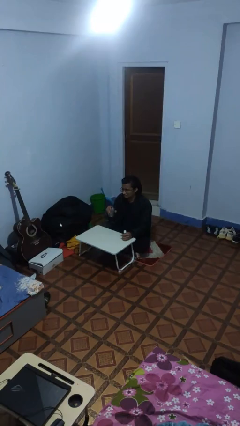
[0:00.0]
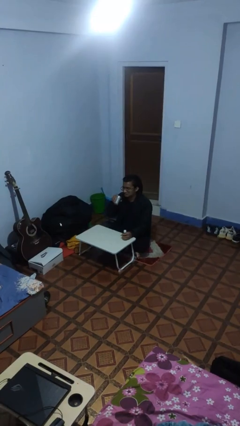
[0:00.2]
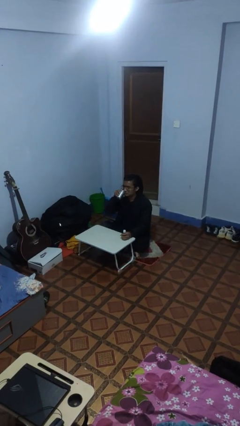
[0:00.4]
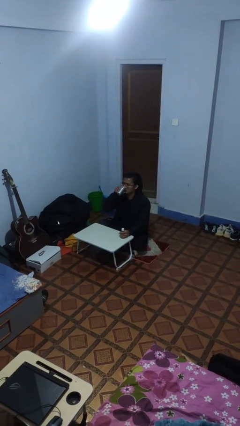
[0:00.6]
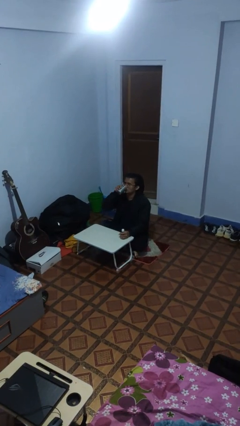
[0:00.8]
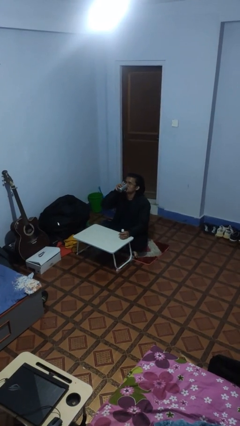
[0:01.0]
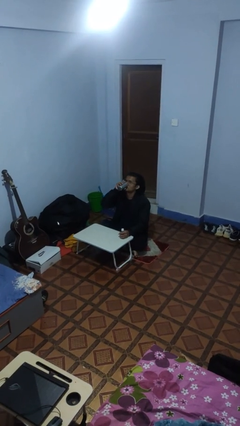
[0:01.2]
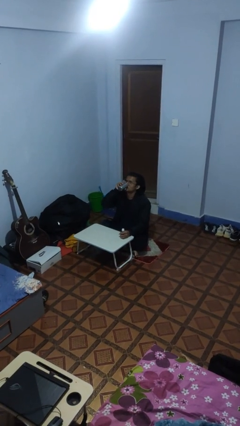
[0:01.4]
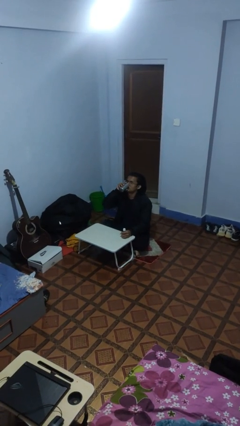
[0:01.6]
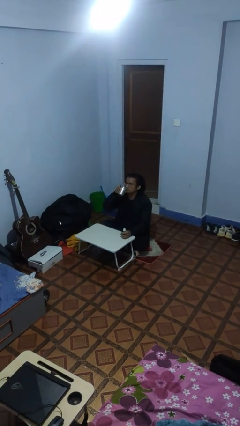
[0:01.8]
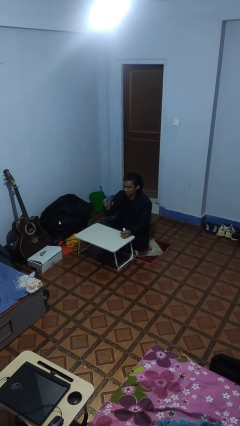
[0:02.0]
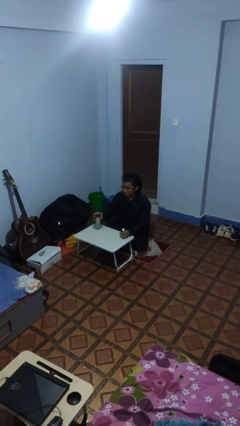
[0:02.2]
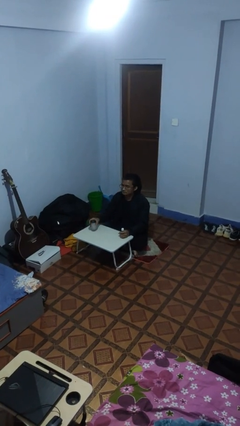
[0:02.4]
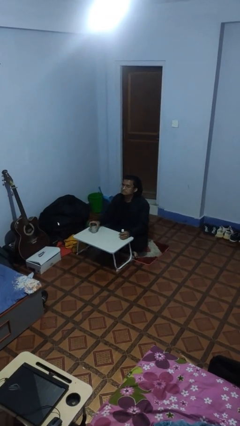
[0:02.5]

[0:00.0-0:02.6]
person drinks from cup

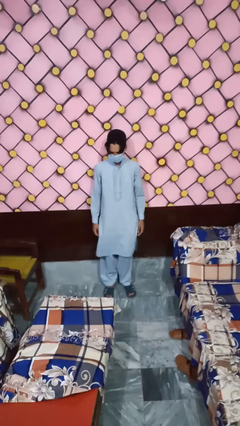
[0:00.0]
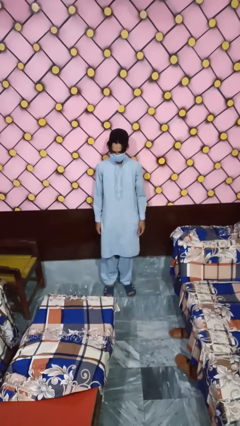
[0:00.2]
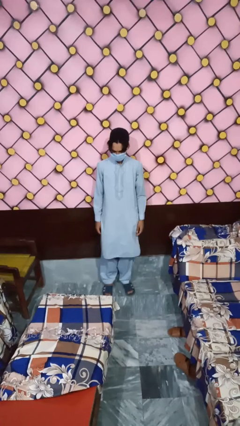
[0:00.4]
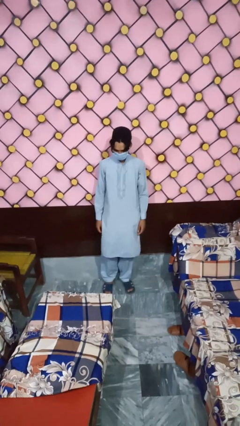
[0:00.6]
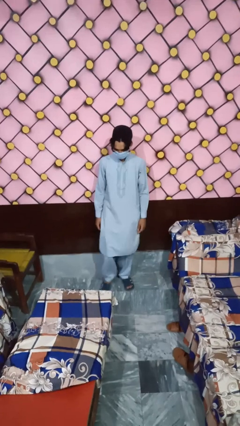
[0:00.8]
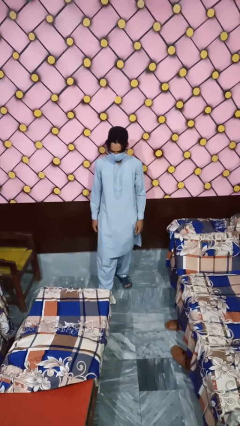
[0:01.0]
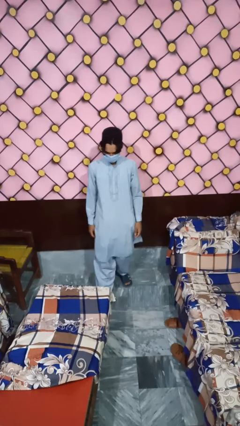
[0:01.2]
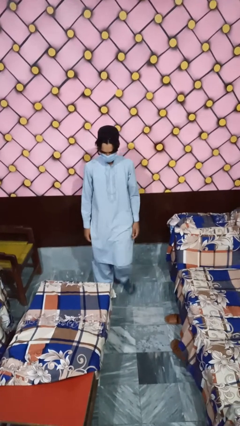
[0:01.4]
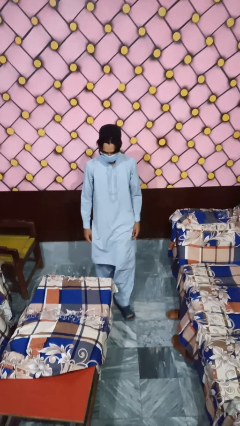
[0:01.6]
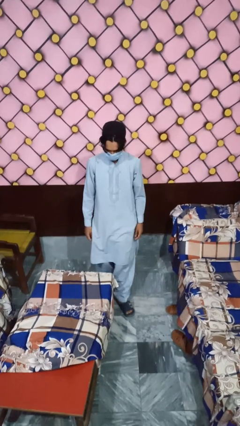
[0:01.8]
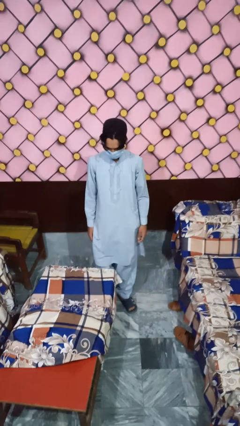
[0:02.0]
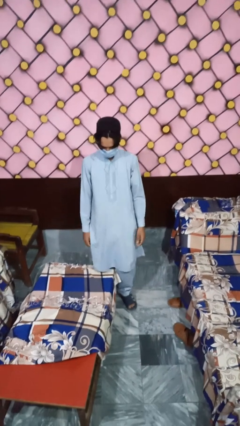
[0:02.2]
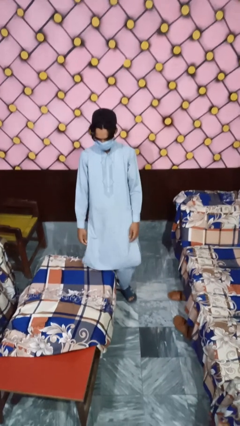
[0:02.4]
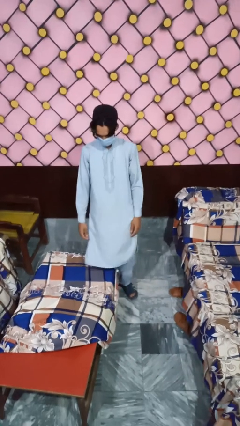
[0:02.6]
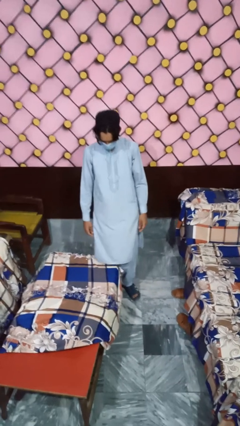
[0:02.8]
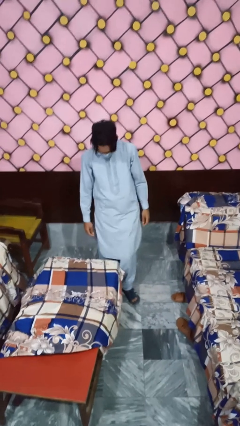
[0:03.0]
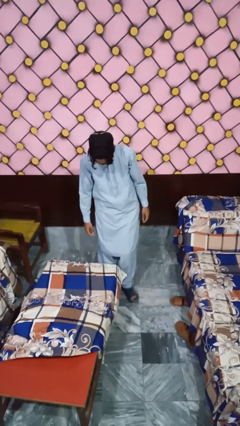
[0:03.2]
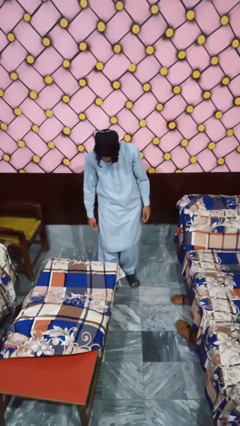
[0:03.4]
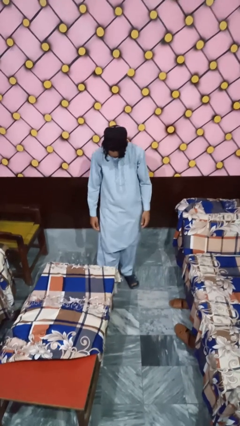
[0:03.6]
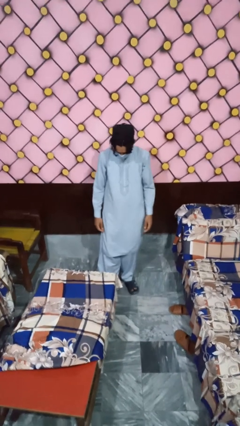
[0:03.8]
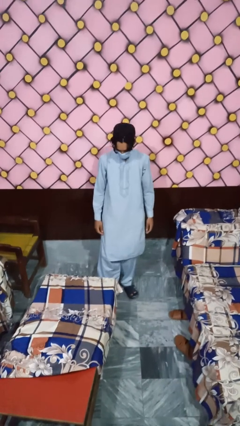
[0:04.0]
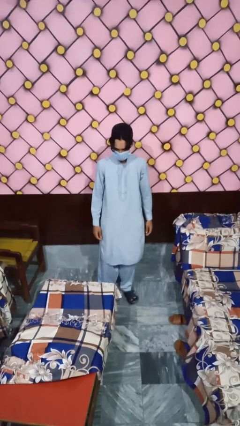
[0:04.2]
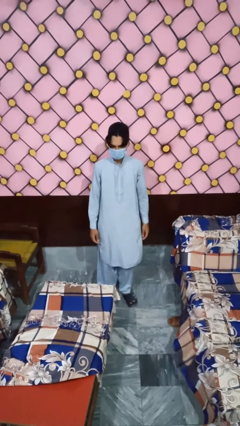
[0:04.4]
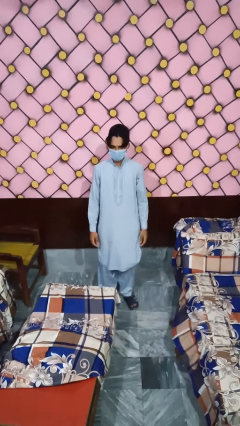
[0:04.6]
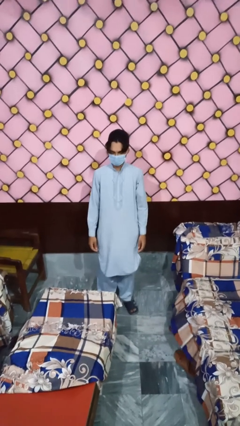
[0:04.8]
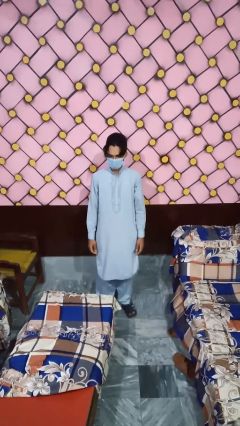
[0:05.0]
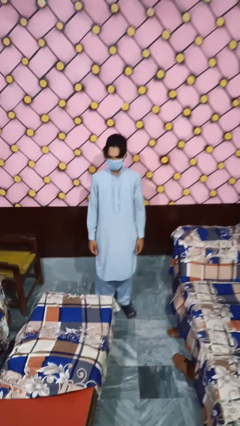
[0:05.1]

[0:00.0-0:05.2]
person bumps into table

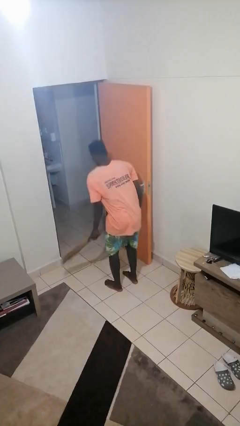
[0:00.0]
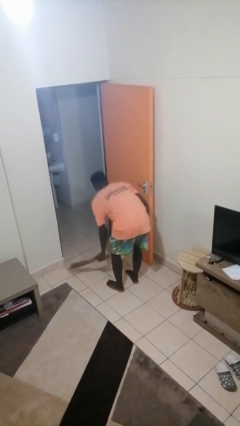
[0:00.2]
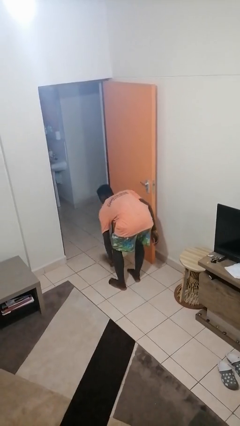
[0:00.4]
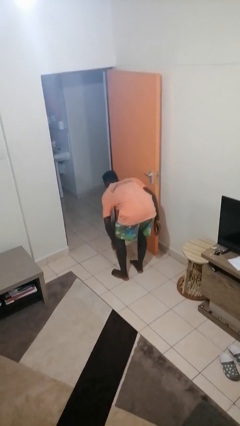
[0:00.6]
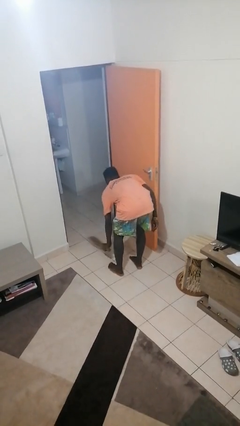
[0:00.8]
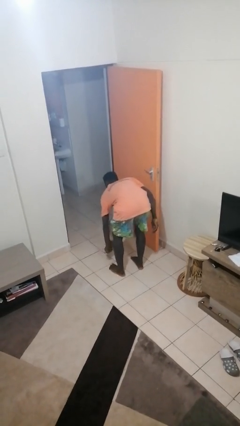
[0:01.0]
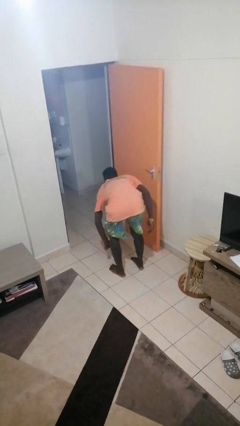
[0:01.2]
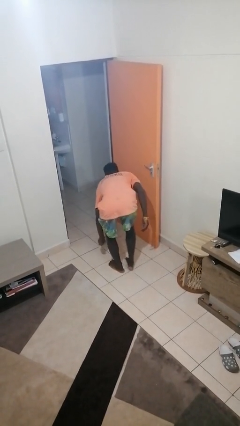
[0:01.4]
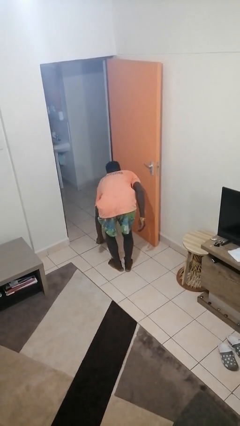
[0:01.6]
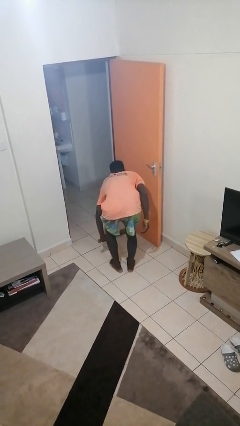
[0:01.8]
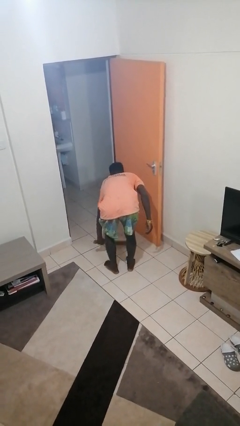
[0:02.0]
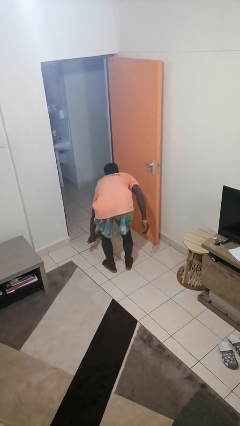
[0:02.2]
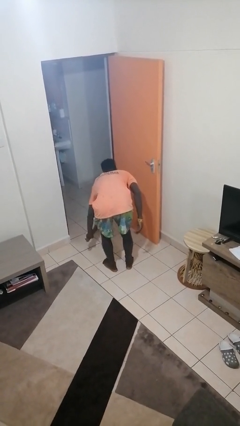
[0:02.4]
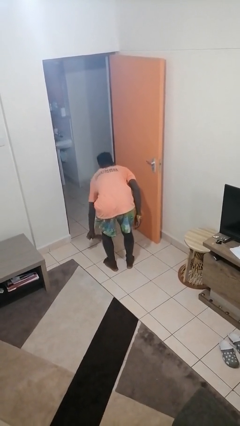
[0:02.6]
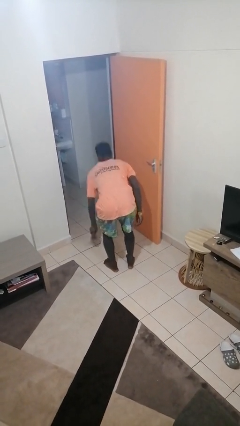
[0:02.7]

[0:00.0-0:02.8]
person sweeps floor

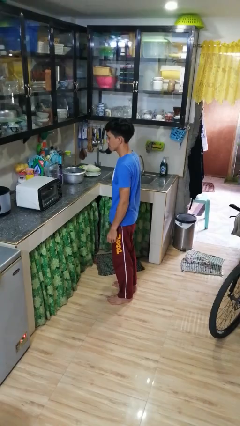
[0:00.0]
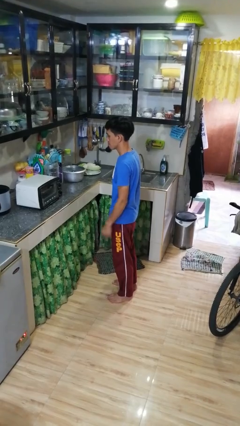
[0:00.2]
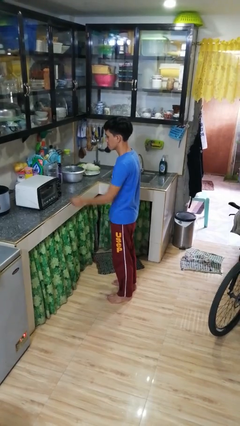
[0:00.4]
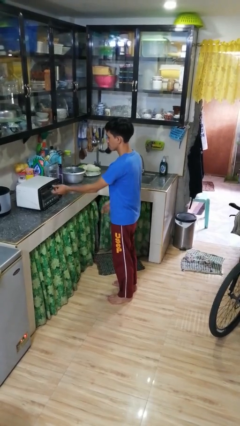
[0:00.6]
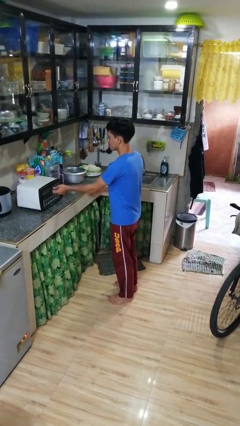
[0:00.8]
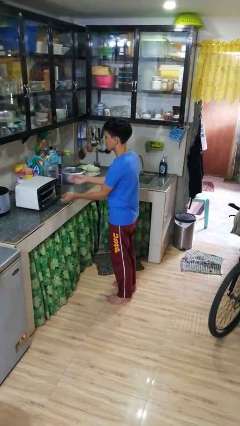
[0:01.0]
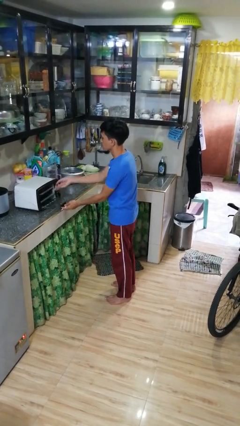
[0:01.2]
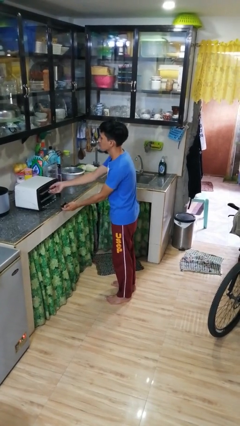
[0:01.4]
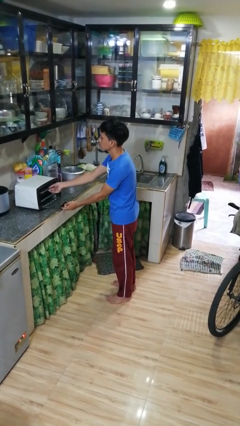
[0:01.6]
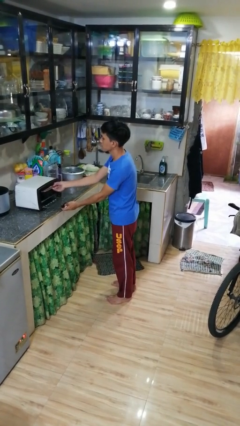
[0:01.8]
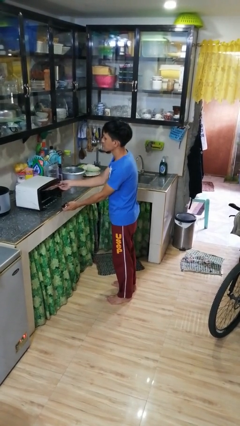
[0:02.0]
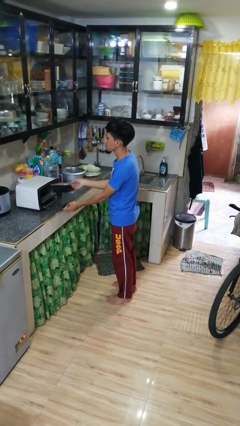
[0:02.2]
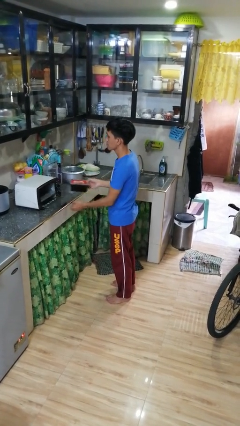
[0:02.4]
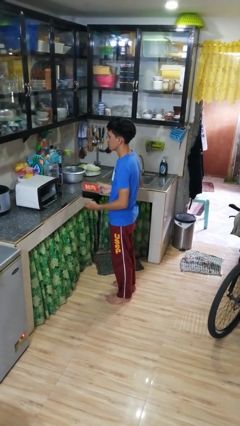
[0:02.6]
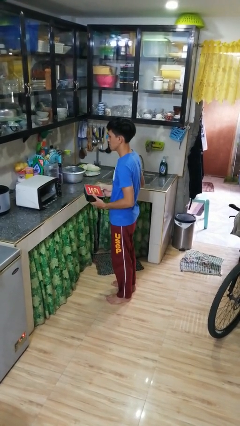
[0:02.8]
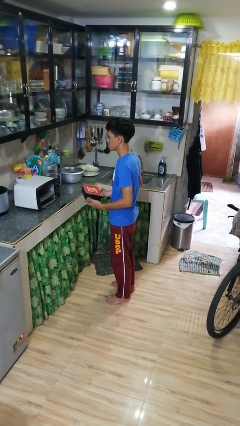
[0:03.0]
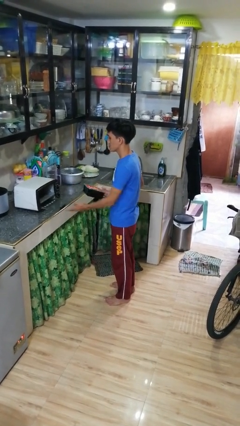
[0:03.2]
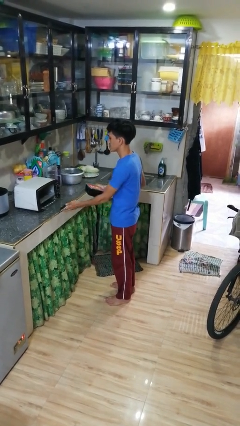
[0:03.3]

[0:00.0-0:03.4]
person takes object from microwave

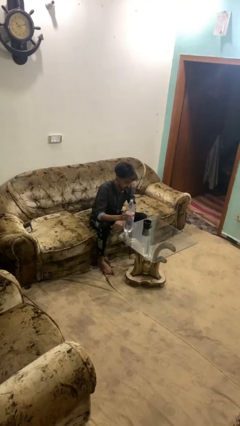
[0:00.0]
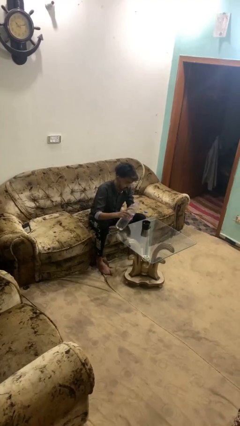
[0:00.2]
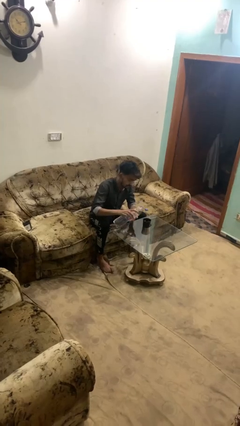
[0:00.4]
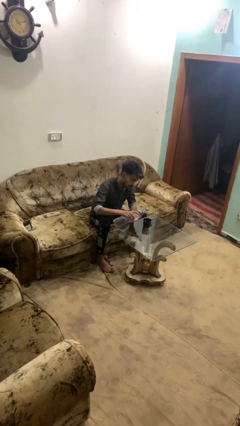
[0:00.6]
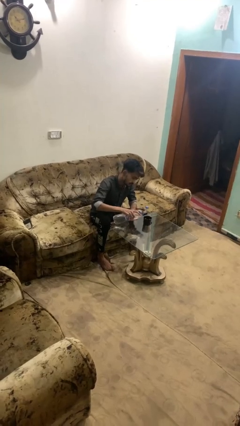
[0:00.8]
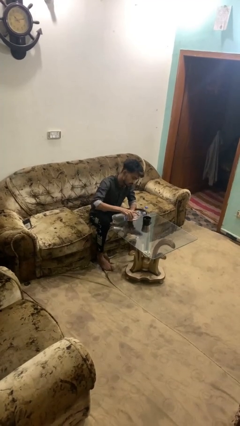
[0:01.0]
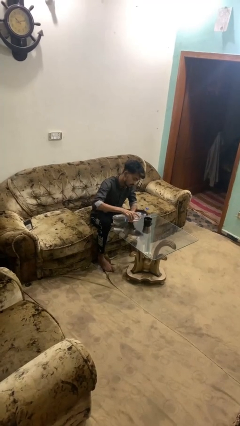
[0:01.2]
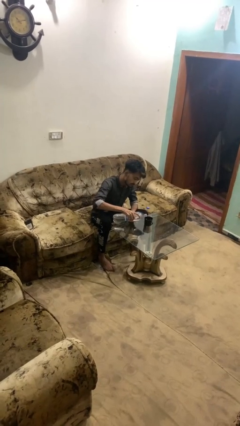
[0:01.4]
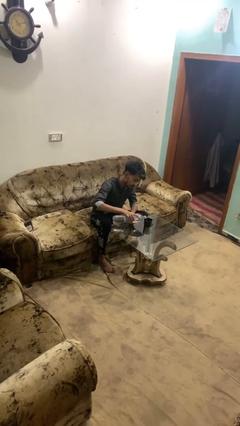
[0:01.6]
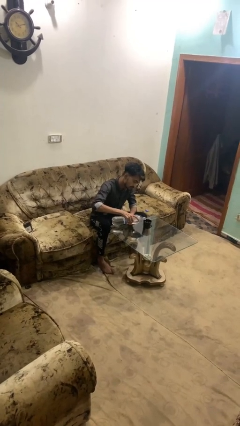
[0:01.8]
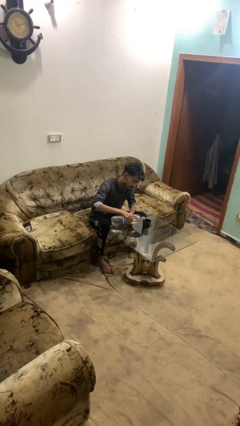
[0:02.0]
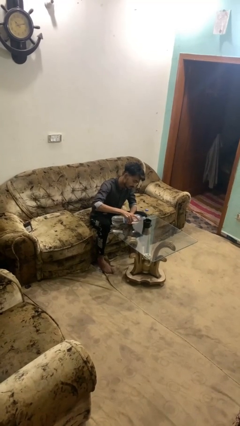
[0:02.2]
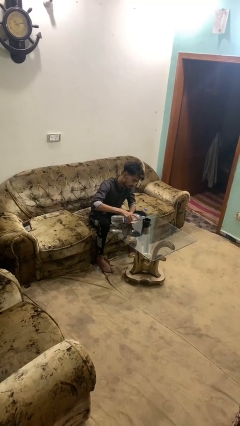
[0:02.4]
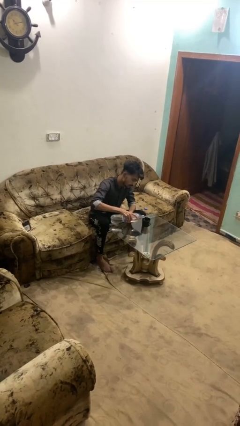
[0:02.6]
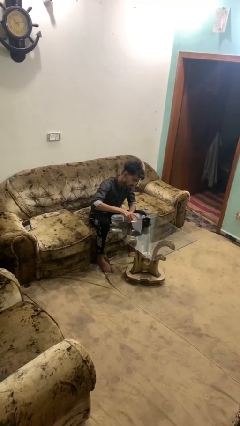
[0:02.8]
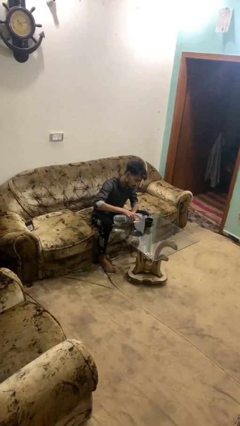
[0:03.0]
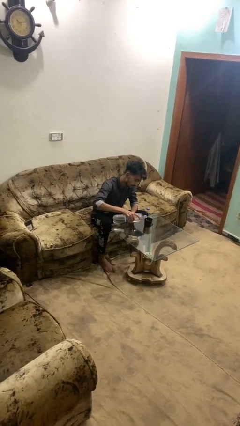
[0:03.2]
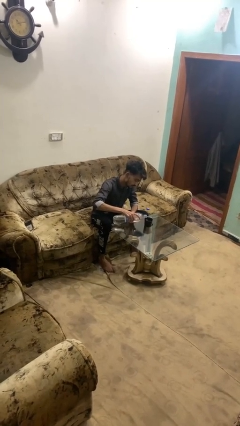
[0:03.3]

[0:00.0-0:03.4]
person pours liquid into cup

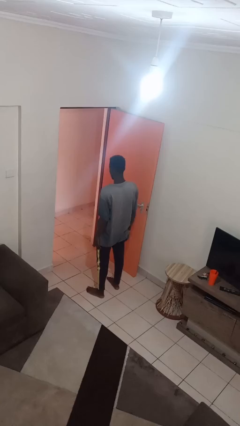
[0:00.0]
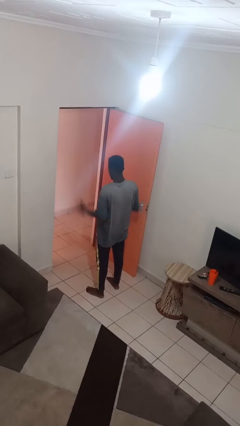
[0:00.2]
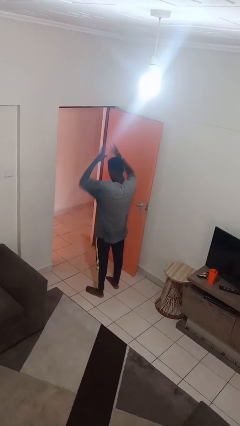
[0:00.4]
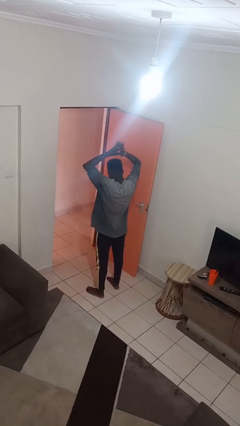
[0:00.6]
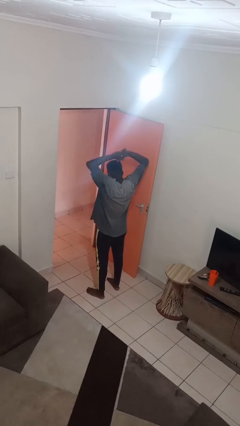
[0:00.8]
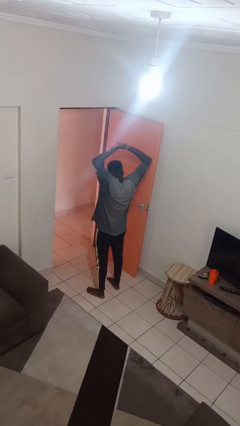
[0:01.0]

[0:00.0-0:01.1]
person stretches arms over head
